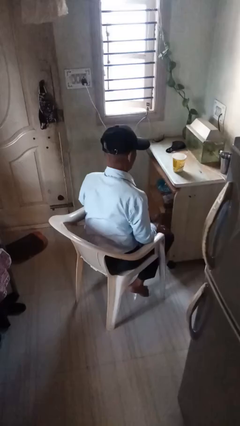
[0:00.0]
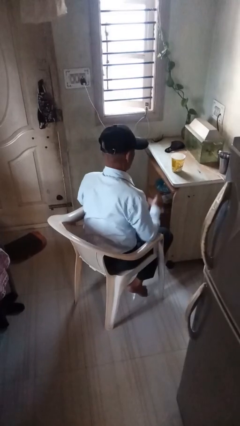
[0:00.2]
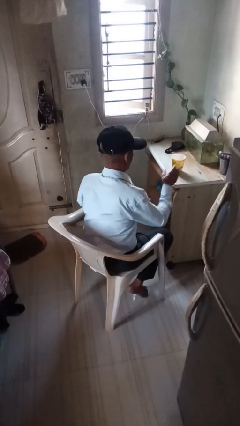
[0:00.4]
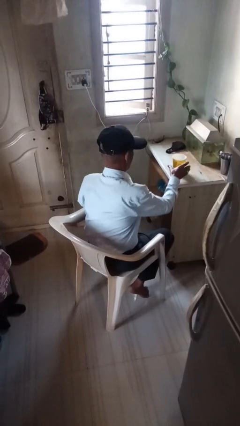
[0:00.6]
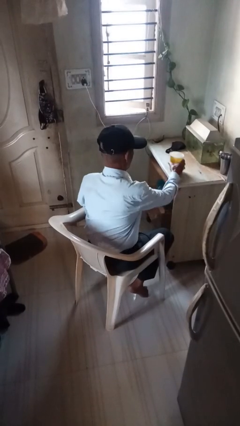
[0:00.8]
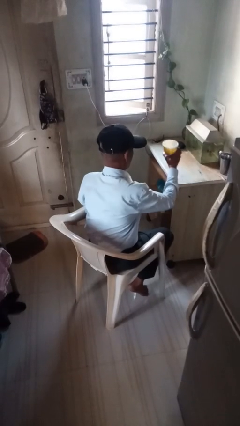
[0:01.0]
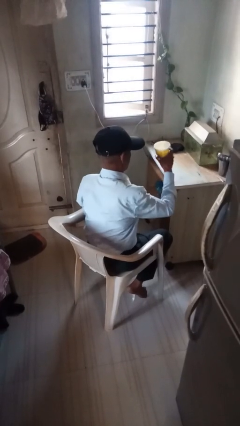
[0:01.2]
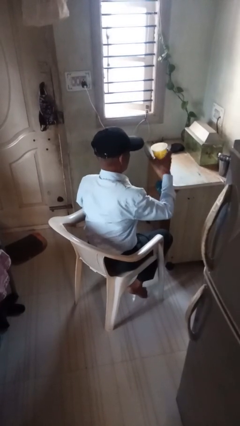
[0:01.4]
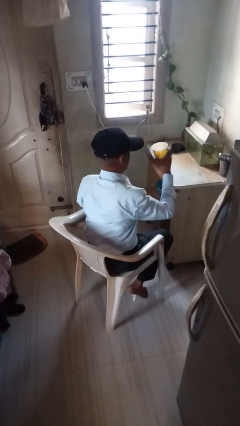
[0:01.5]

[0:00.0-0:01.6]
person picks up object from table

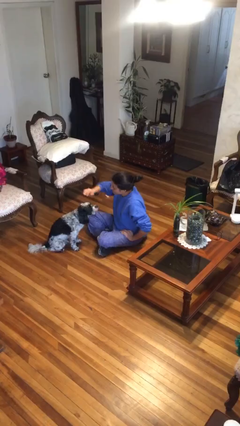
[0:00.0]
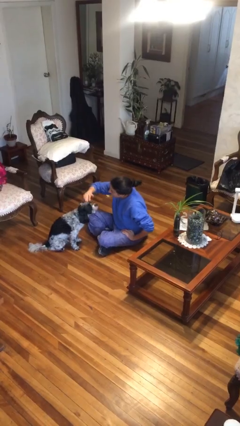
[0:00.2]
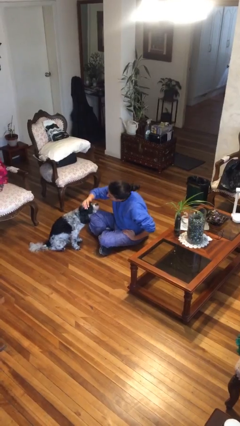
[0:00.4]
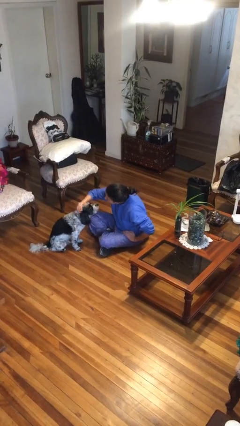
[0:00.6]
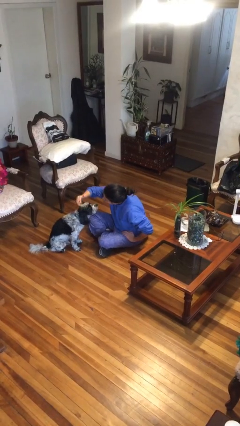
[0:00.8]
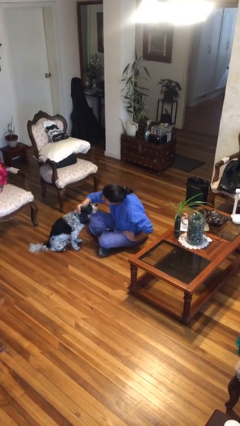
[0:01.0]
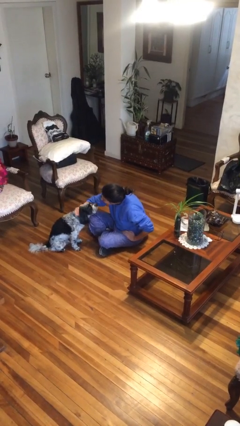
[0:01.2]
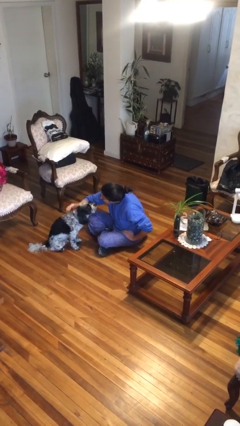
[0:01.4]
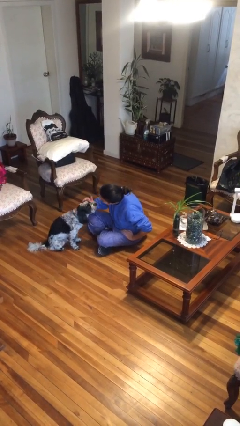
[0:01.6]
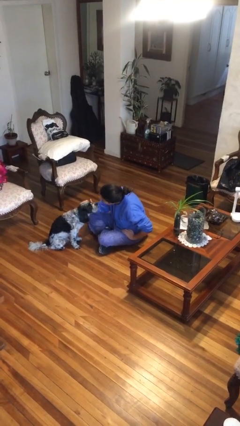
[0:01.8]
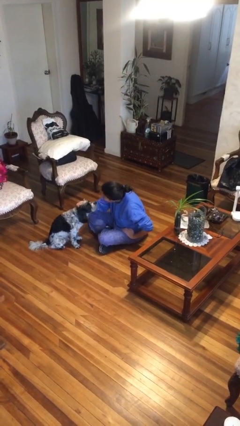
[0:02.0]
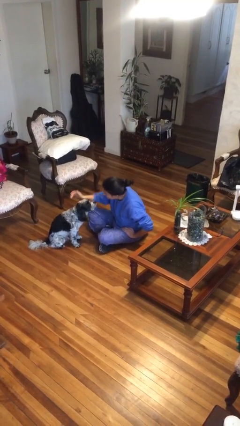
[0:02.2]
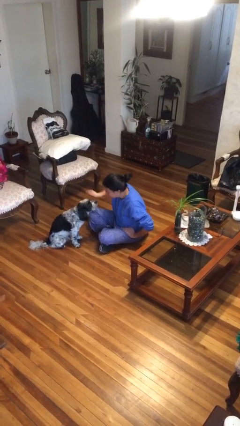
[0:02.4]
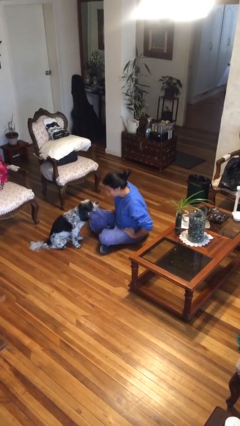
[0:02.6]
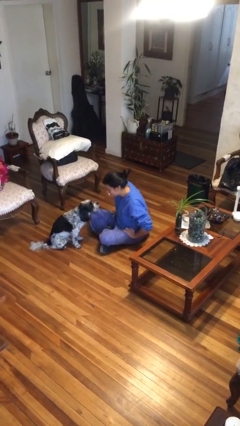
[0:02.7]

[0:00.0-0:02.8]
person pets dog

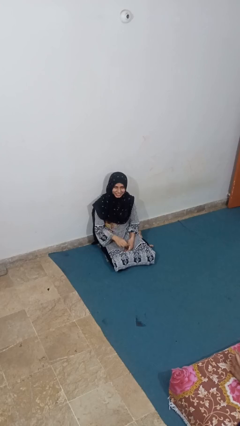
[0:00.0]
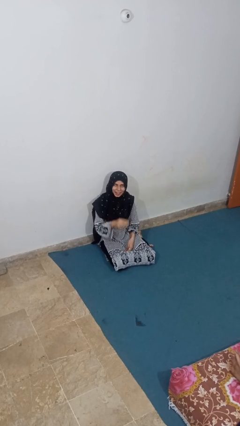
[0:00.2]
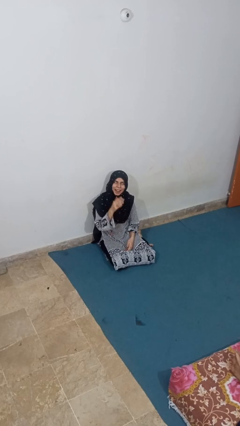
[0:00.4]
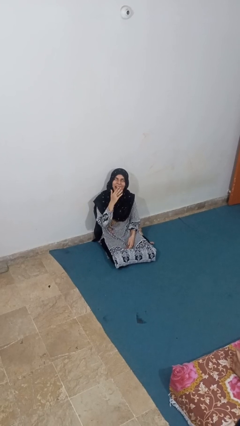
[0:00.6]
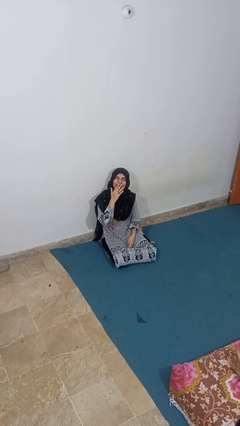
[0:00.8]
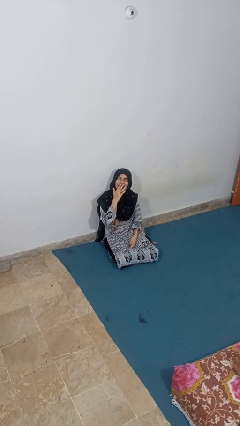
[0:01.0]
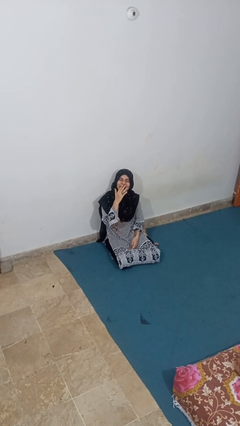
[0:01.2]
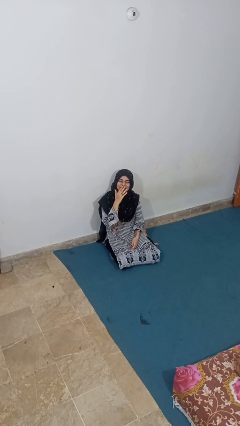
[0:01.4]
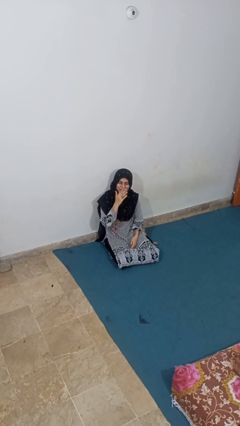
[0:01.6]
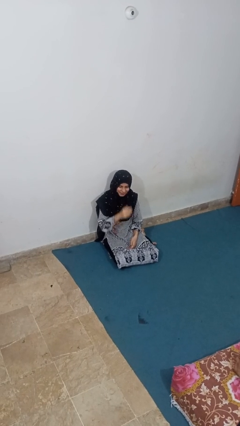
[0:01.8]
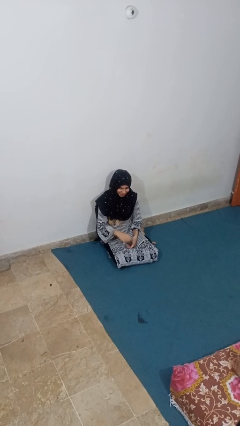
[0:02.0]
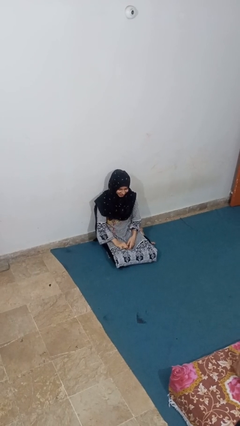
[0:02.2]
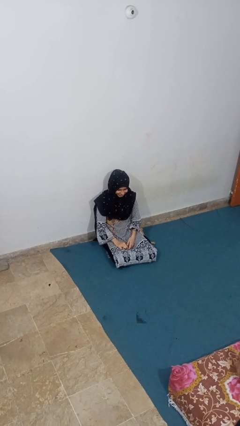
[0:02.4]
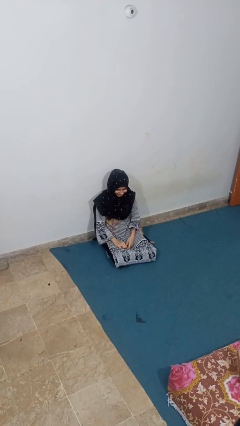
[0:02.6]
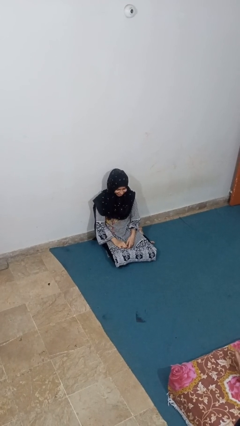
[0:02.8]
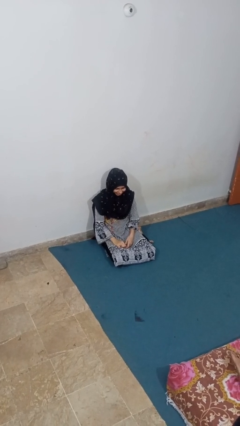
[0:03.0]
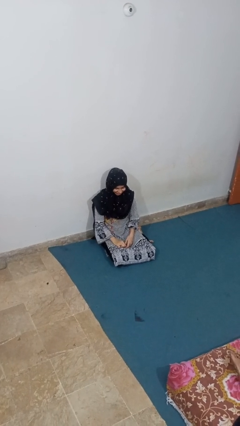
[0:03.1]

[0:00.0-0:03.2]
person yawns

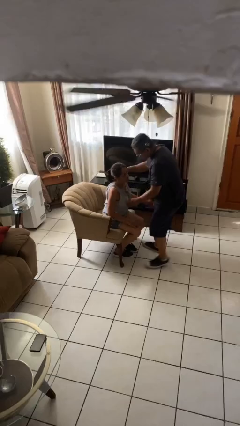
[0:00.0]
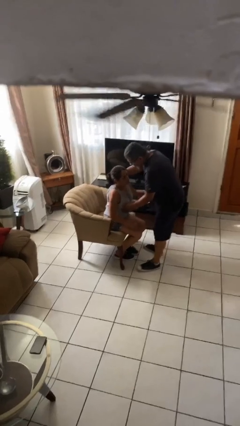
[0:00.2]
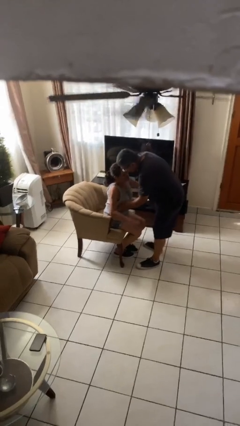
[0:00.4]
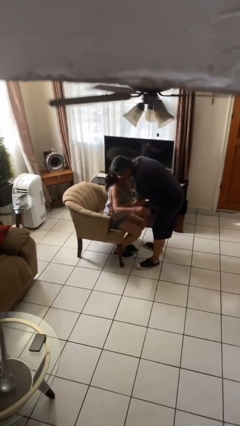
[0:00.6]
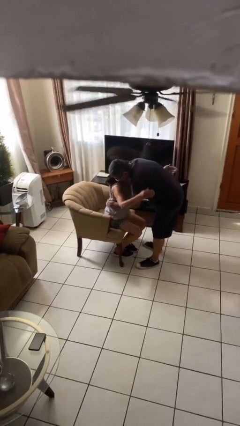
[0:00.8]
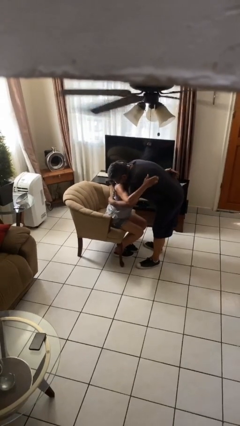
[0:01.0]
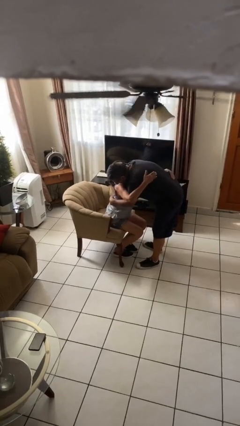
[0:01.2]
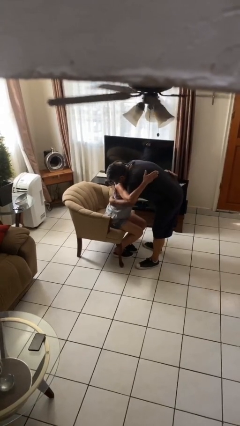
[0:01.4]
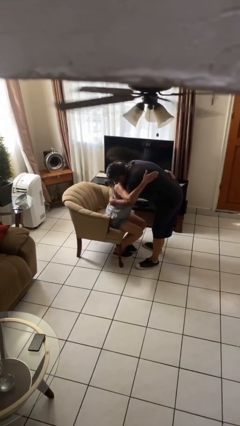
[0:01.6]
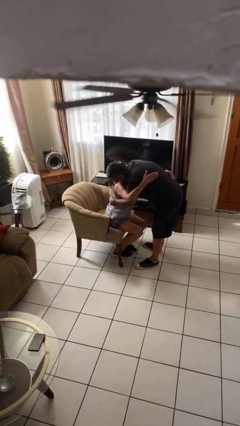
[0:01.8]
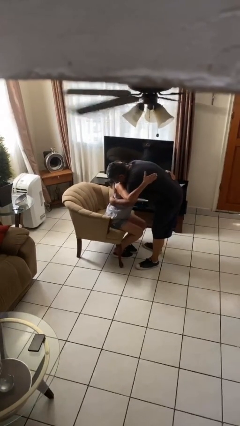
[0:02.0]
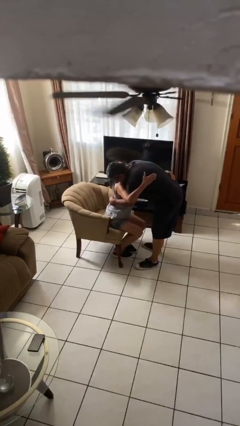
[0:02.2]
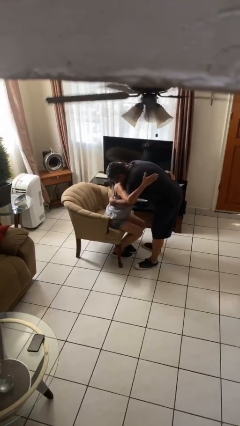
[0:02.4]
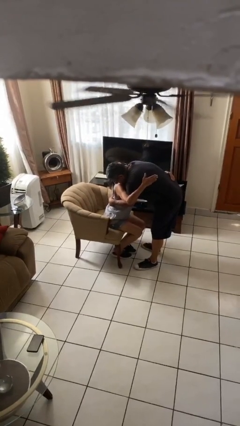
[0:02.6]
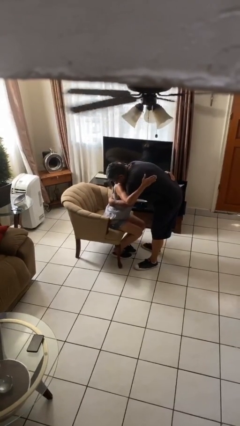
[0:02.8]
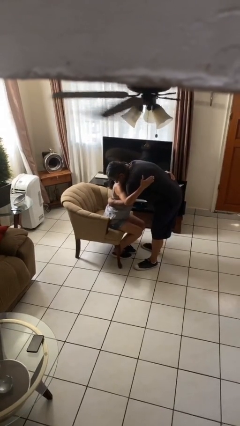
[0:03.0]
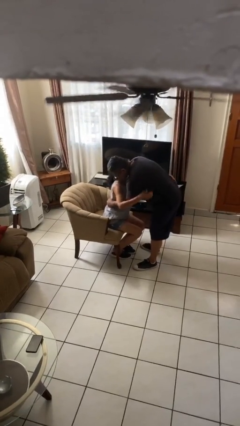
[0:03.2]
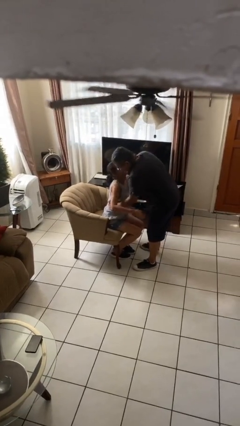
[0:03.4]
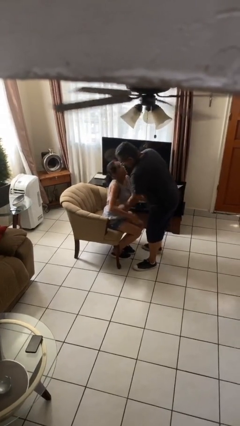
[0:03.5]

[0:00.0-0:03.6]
person embraces person

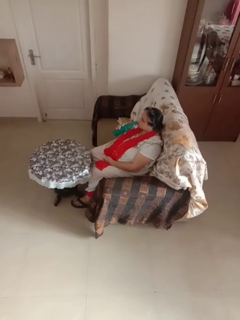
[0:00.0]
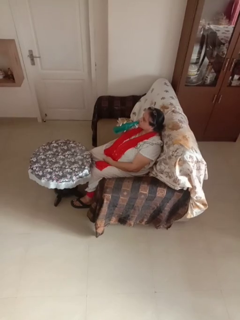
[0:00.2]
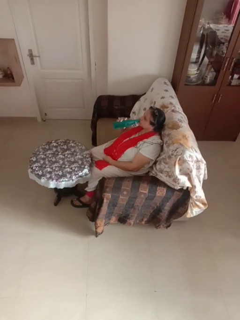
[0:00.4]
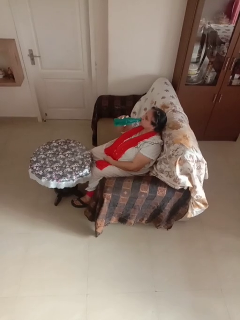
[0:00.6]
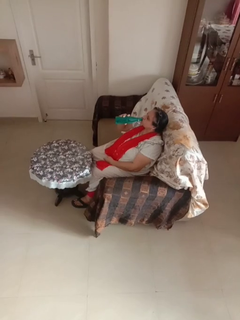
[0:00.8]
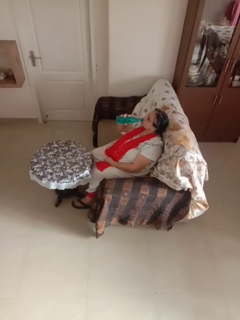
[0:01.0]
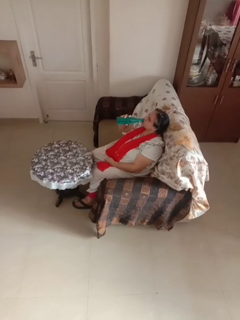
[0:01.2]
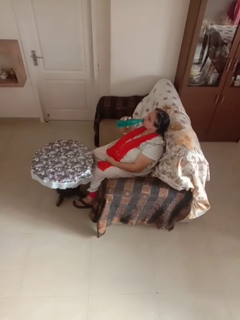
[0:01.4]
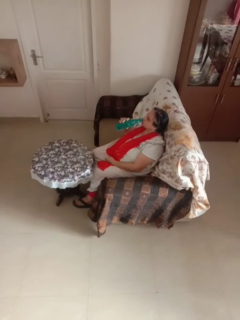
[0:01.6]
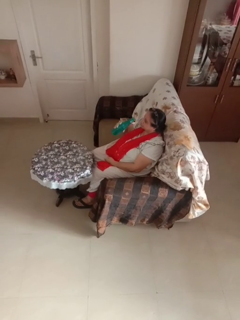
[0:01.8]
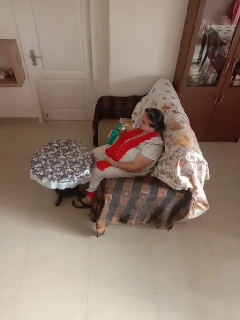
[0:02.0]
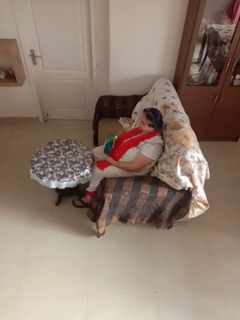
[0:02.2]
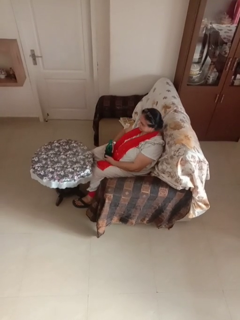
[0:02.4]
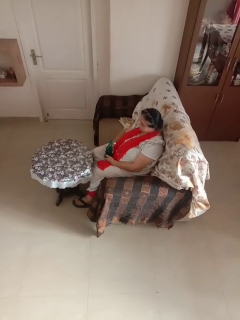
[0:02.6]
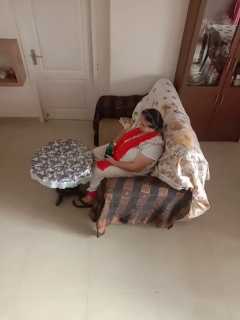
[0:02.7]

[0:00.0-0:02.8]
person drinks from bottle

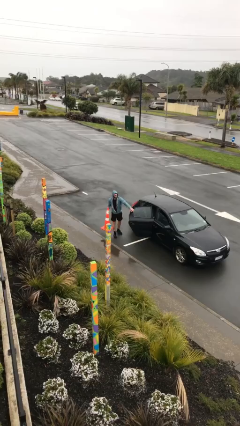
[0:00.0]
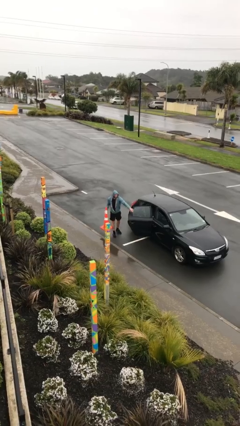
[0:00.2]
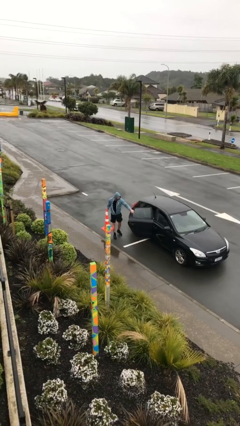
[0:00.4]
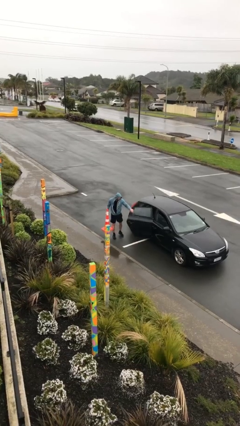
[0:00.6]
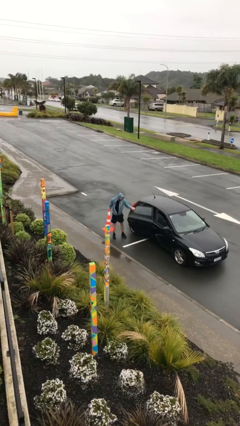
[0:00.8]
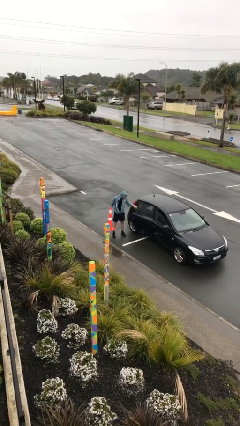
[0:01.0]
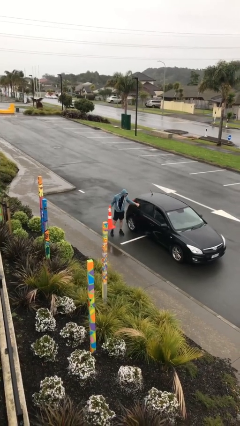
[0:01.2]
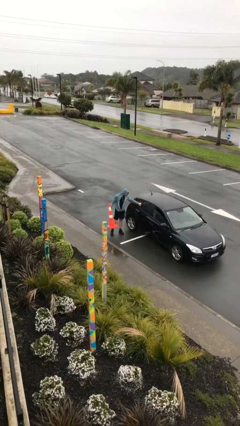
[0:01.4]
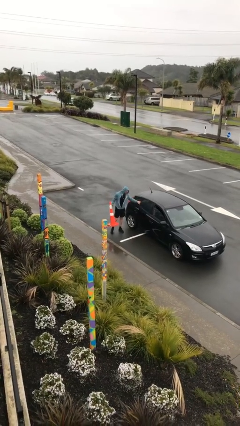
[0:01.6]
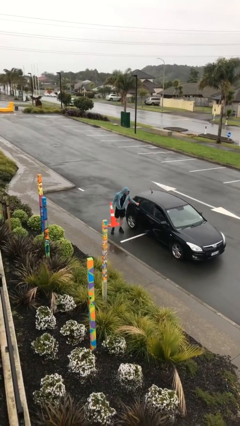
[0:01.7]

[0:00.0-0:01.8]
person closes car door

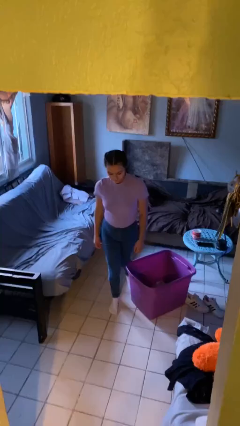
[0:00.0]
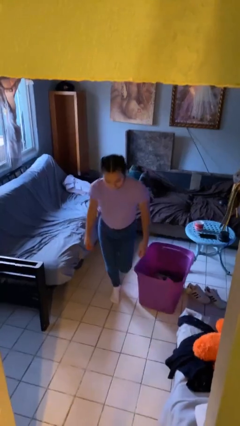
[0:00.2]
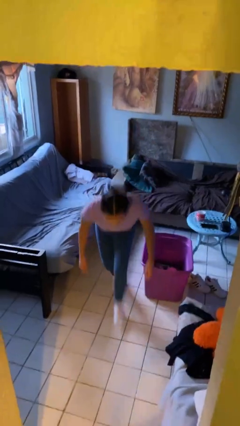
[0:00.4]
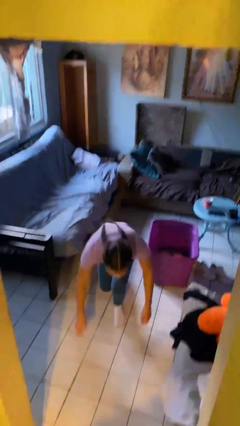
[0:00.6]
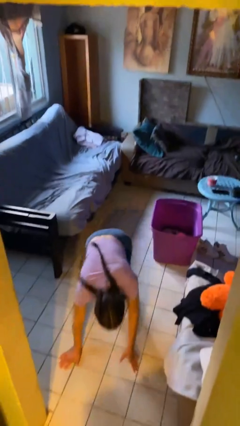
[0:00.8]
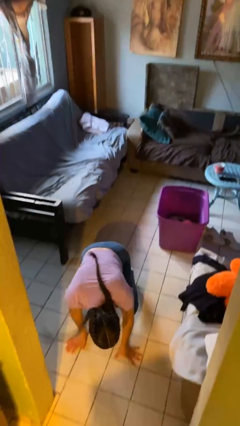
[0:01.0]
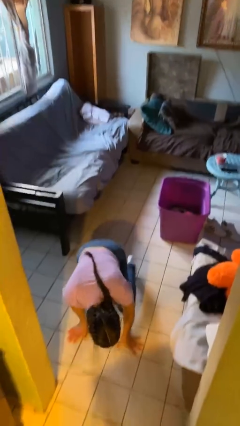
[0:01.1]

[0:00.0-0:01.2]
person lies down on floor

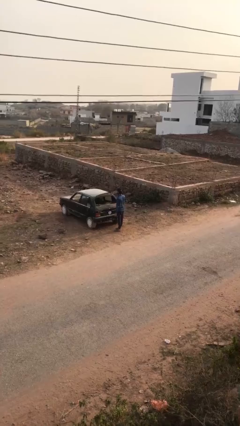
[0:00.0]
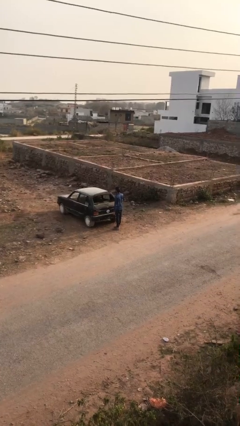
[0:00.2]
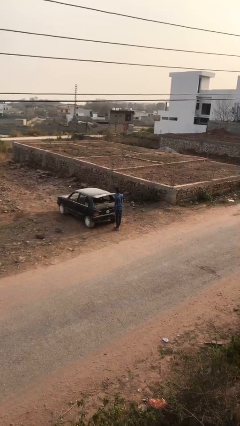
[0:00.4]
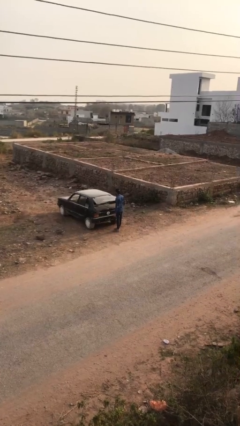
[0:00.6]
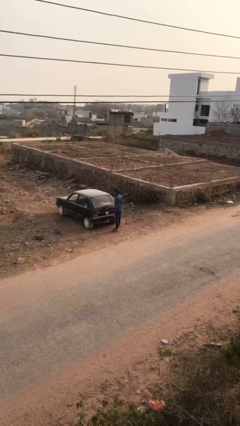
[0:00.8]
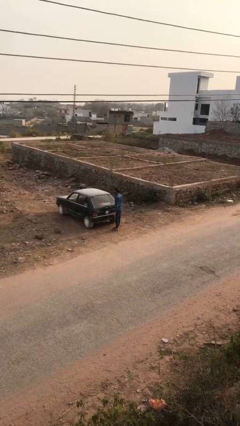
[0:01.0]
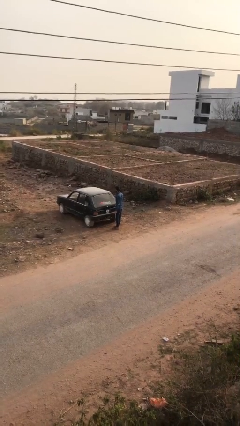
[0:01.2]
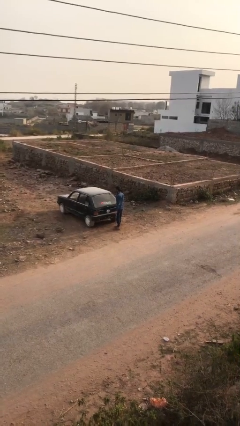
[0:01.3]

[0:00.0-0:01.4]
person closes car trunk
